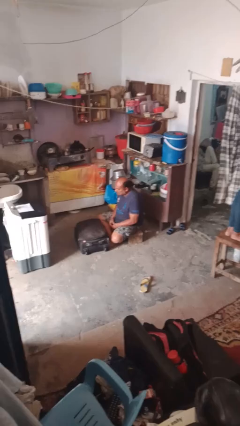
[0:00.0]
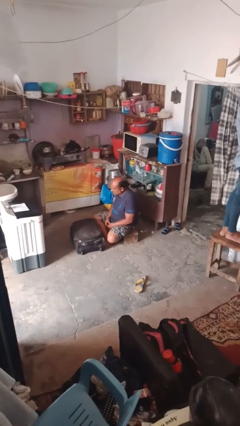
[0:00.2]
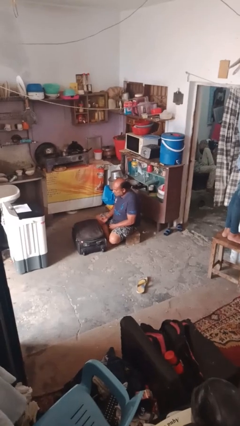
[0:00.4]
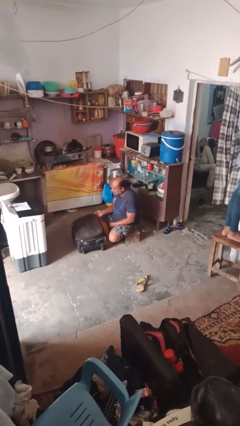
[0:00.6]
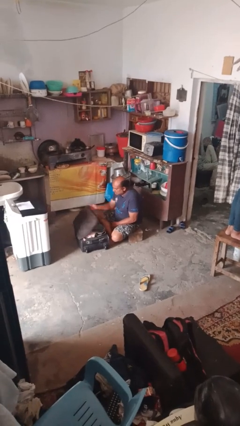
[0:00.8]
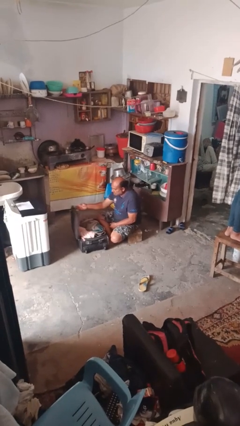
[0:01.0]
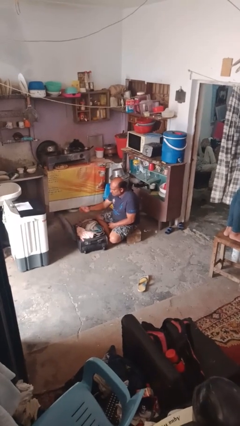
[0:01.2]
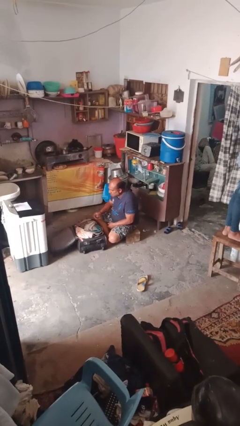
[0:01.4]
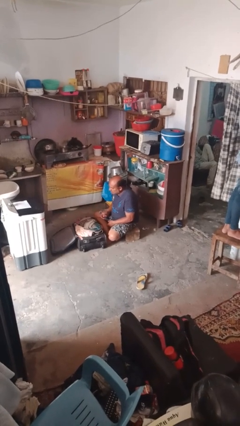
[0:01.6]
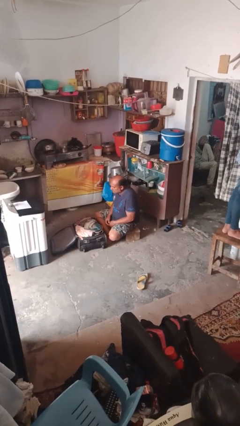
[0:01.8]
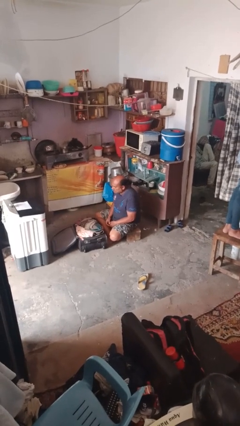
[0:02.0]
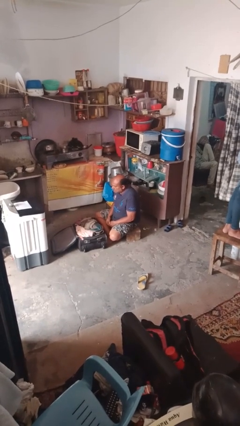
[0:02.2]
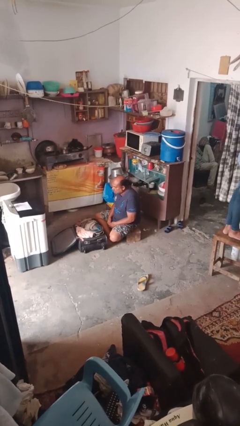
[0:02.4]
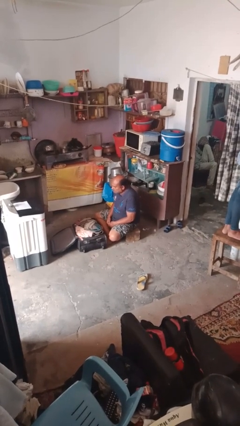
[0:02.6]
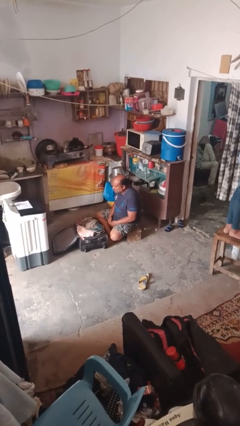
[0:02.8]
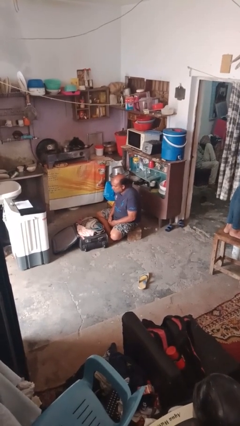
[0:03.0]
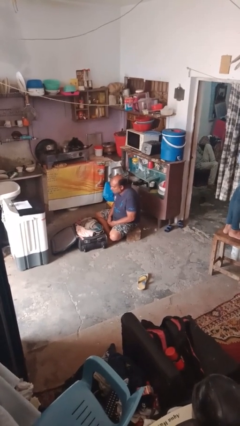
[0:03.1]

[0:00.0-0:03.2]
person opens suitcase

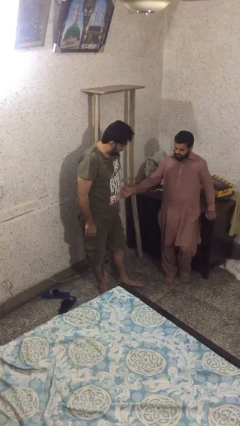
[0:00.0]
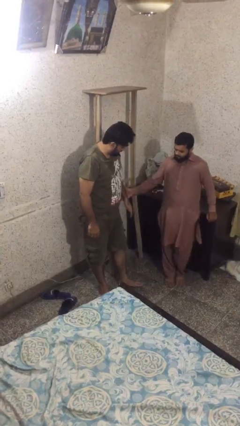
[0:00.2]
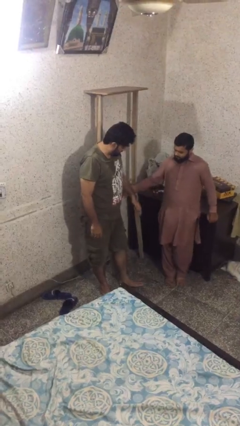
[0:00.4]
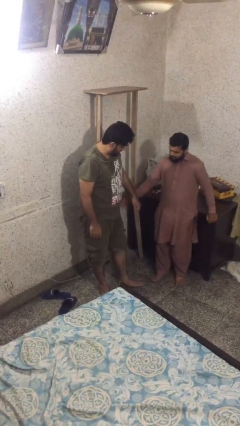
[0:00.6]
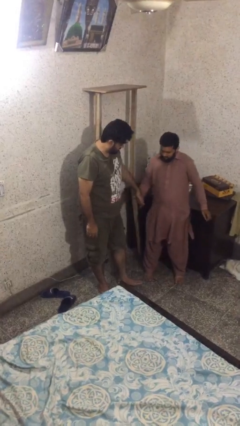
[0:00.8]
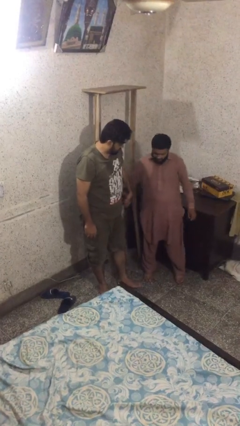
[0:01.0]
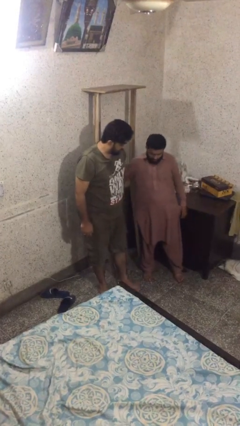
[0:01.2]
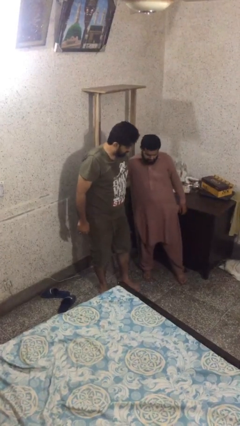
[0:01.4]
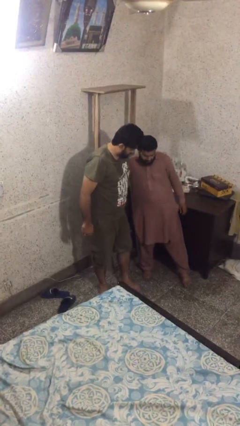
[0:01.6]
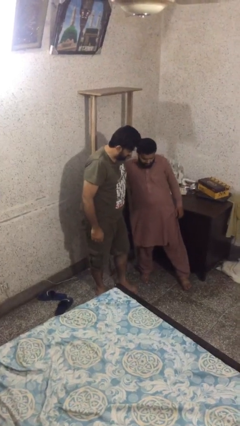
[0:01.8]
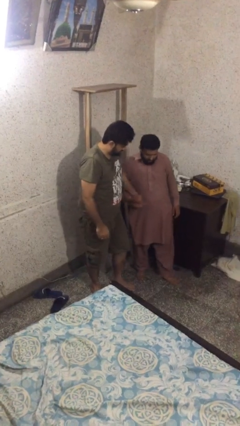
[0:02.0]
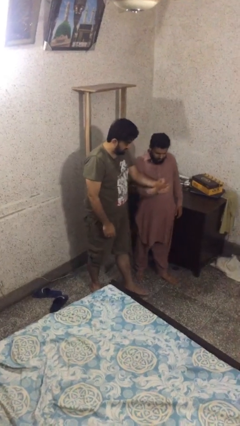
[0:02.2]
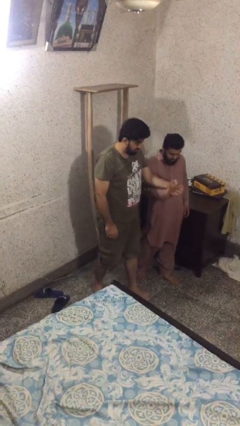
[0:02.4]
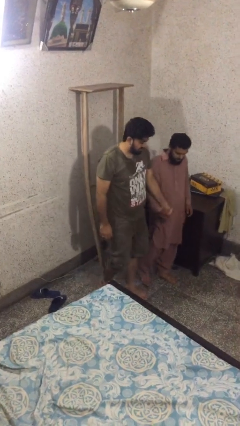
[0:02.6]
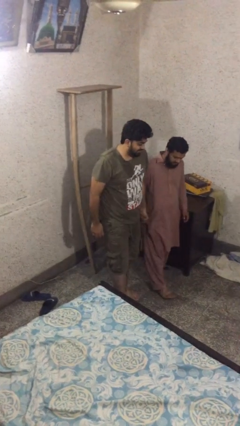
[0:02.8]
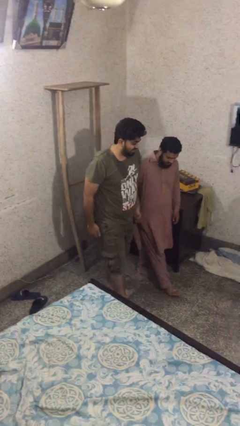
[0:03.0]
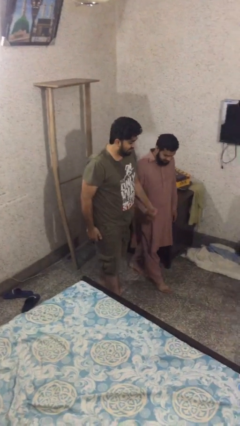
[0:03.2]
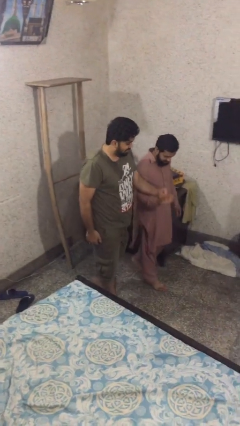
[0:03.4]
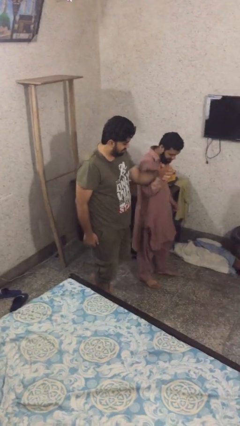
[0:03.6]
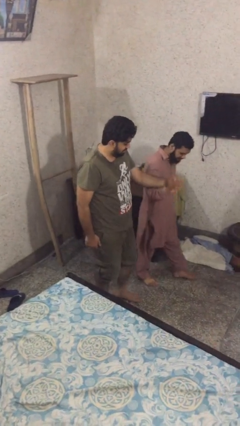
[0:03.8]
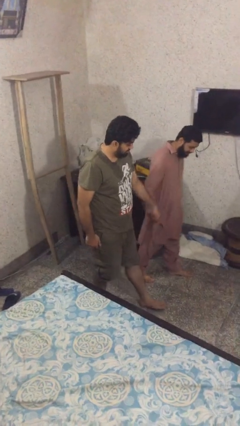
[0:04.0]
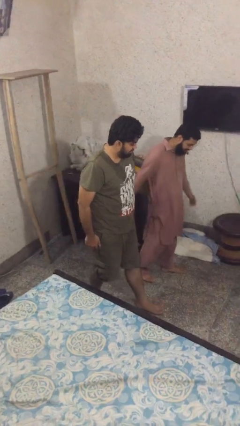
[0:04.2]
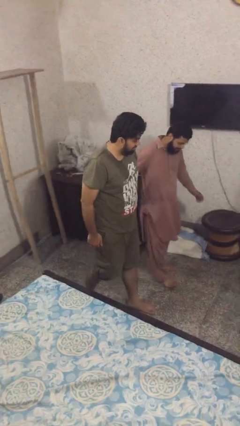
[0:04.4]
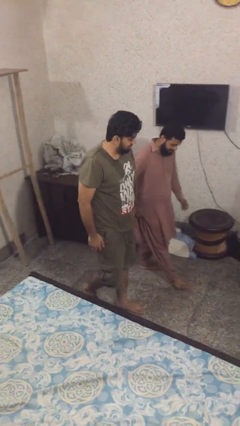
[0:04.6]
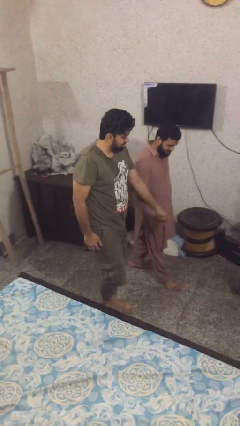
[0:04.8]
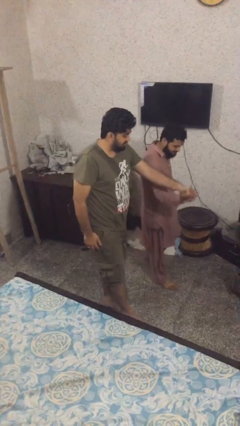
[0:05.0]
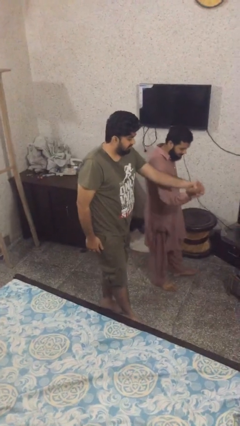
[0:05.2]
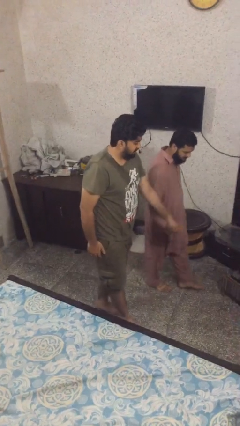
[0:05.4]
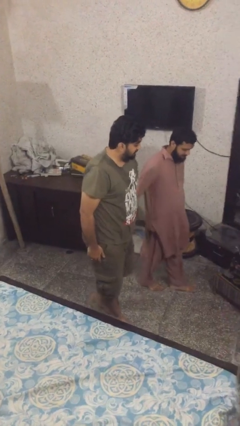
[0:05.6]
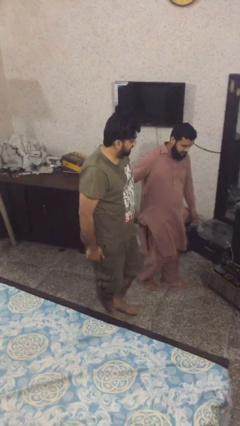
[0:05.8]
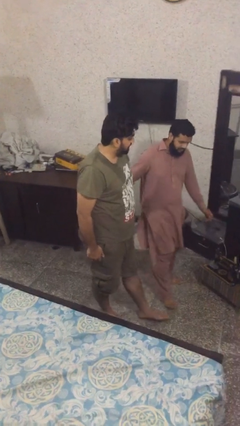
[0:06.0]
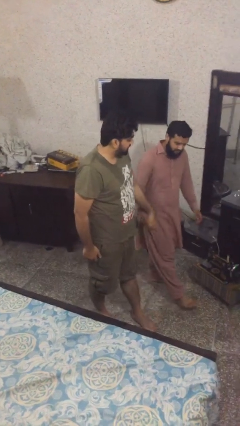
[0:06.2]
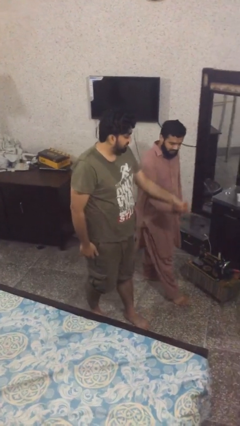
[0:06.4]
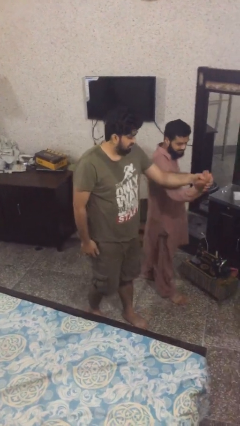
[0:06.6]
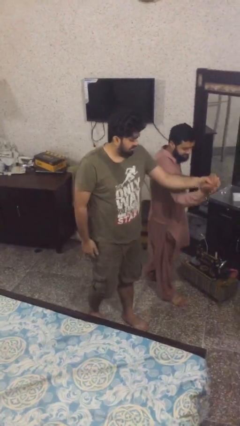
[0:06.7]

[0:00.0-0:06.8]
person holds hand

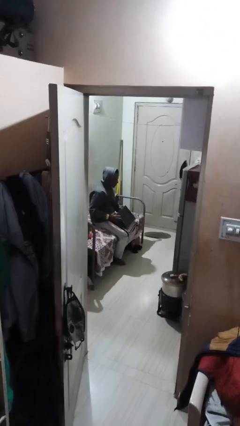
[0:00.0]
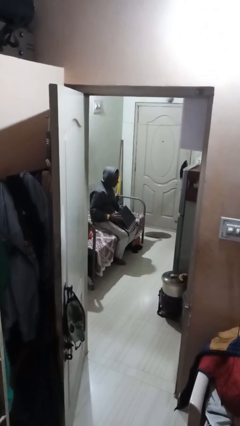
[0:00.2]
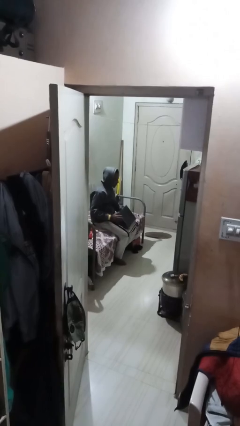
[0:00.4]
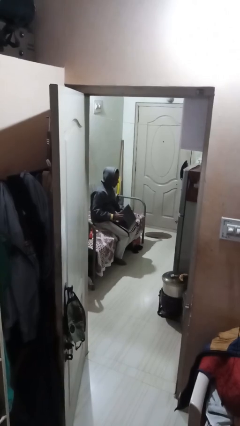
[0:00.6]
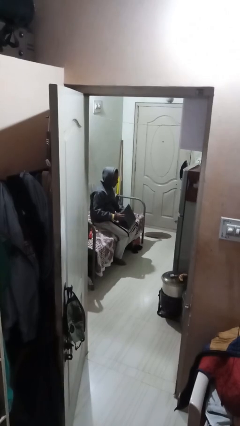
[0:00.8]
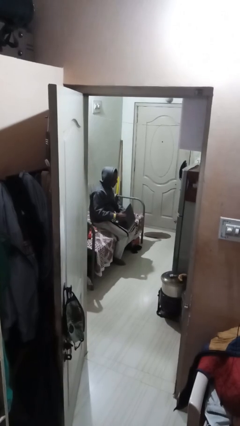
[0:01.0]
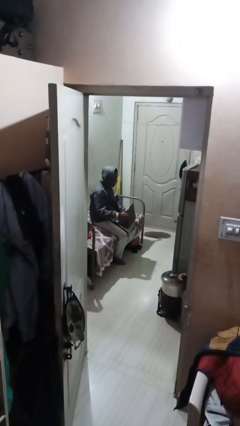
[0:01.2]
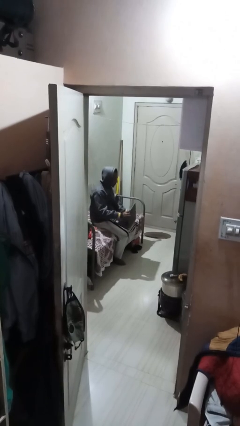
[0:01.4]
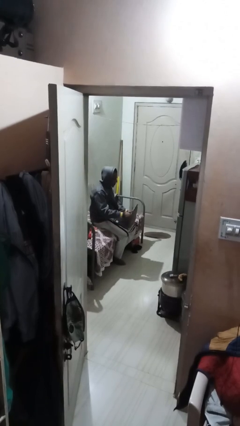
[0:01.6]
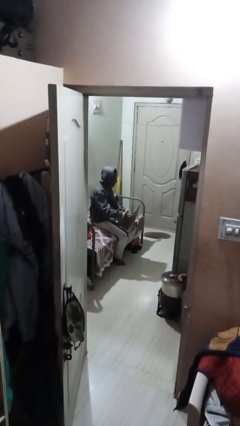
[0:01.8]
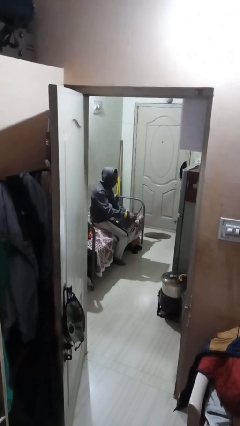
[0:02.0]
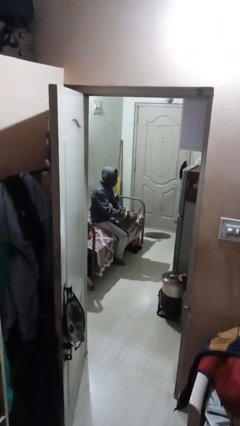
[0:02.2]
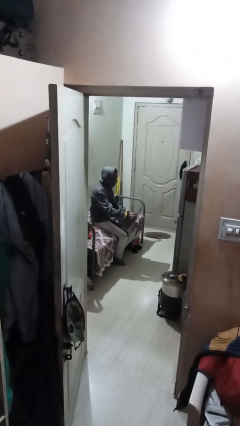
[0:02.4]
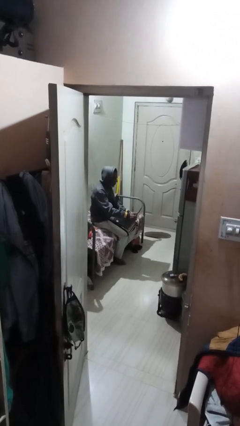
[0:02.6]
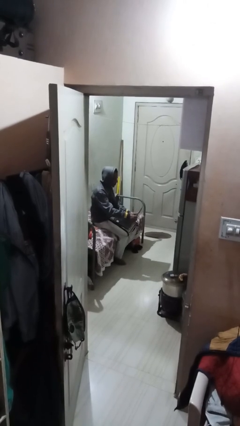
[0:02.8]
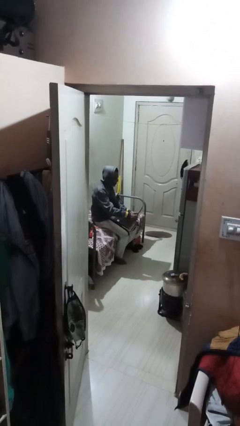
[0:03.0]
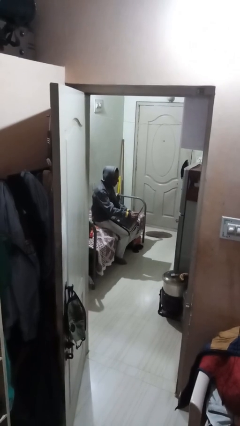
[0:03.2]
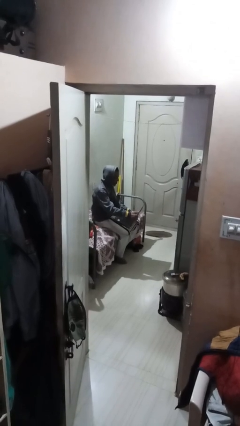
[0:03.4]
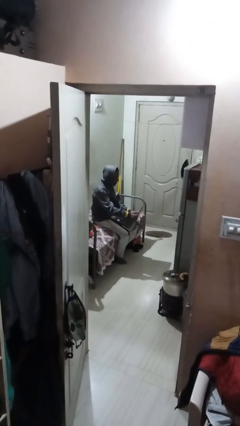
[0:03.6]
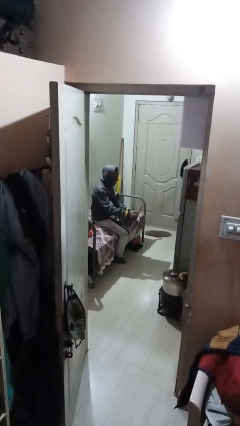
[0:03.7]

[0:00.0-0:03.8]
person interacts with laptop

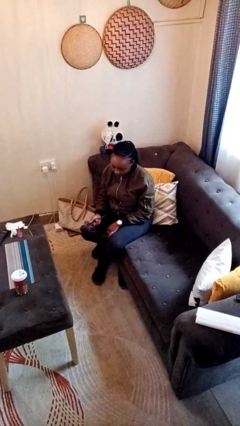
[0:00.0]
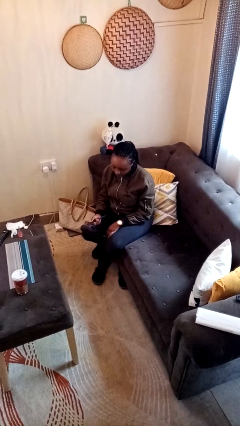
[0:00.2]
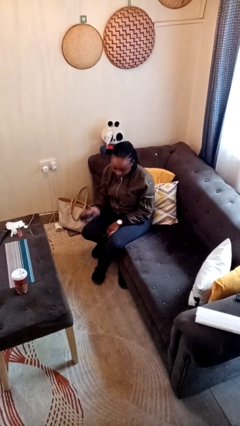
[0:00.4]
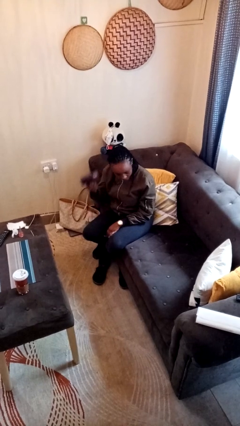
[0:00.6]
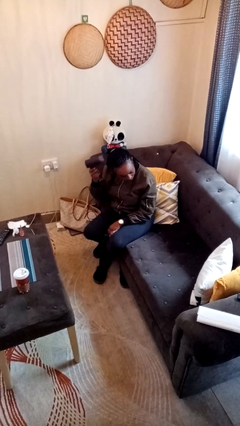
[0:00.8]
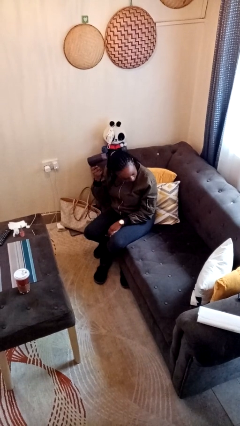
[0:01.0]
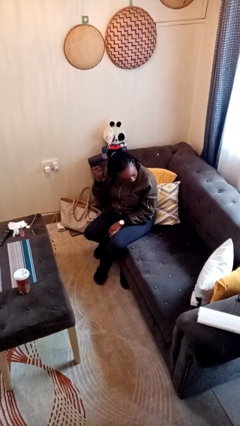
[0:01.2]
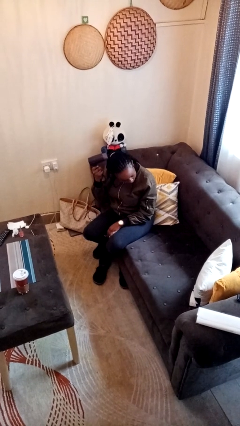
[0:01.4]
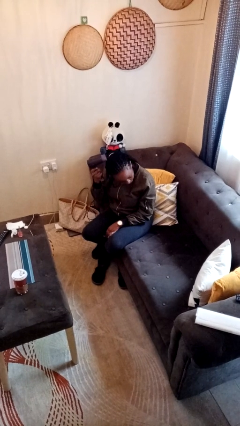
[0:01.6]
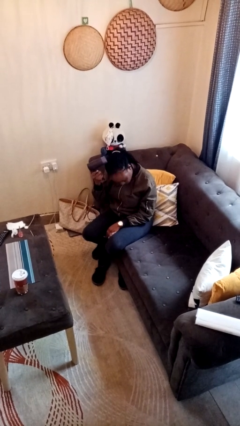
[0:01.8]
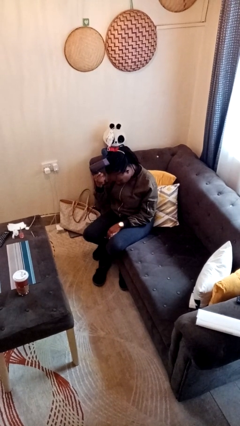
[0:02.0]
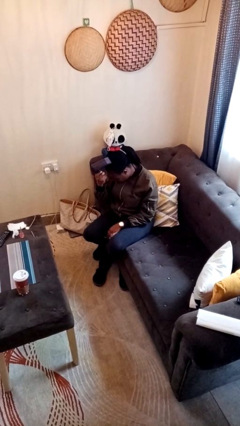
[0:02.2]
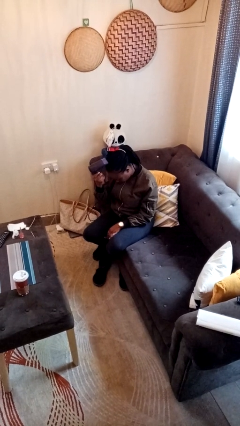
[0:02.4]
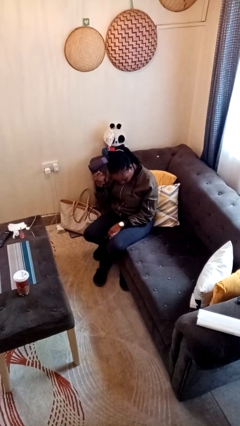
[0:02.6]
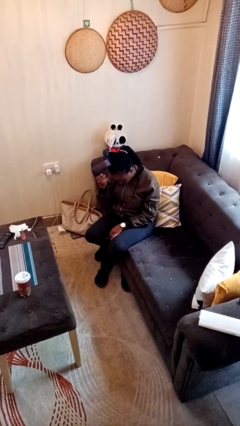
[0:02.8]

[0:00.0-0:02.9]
person dries hair with hairdryer

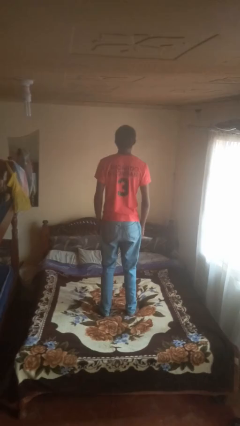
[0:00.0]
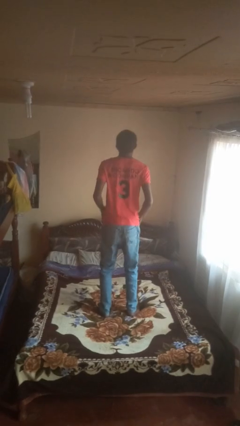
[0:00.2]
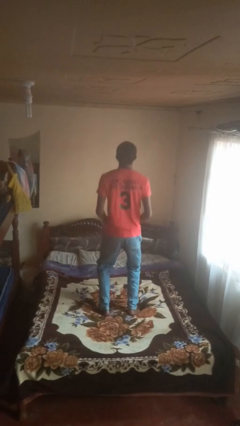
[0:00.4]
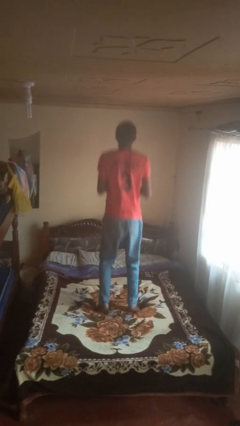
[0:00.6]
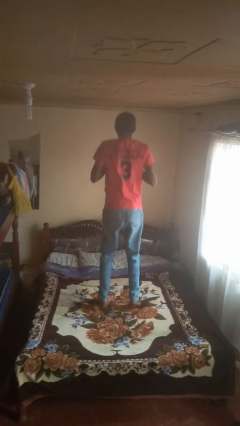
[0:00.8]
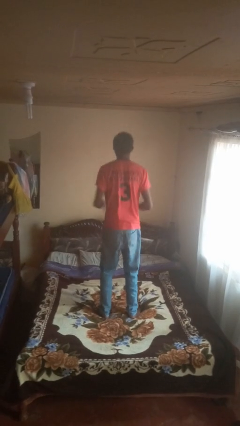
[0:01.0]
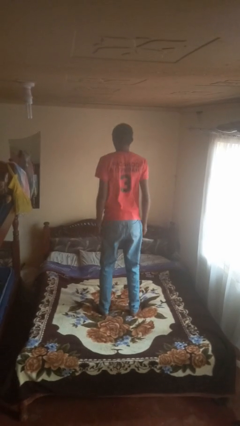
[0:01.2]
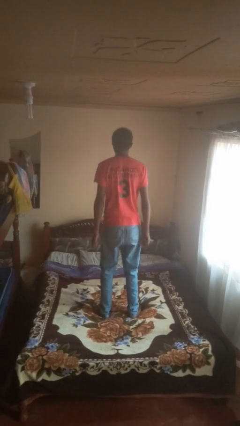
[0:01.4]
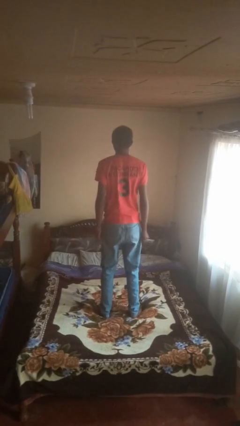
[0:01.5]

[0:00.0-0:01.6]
person jumps on bed
